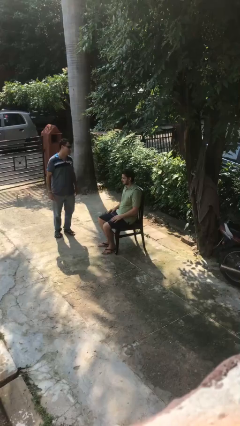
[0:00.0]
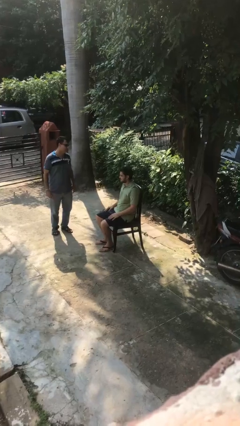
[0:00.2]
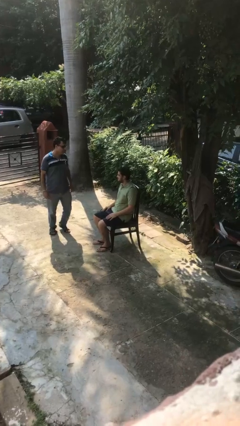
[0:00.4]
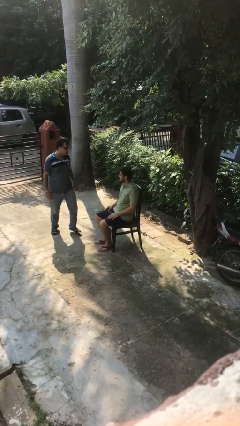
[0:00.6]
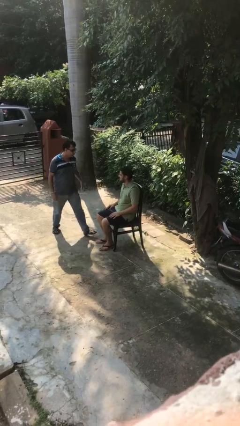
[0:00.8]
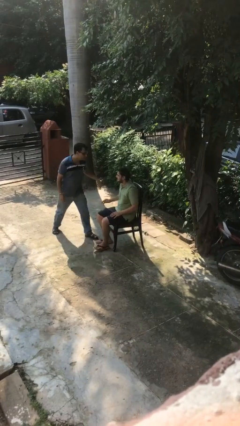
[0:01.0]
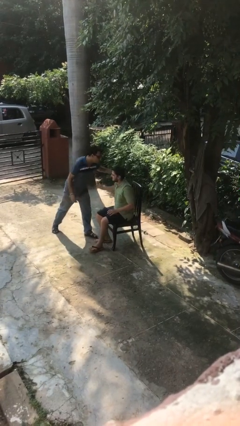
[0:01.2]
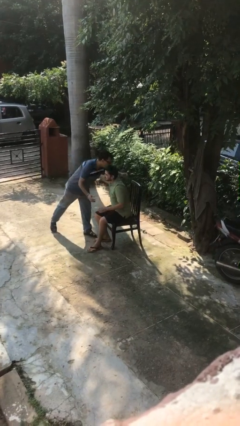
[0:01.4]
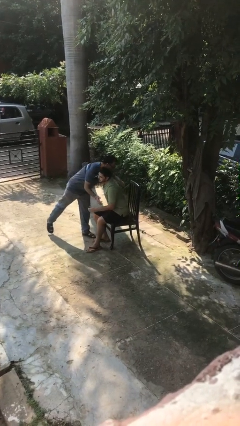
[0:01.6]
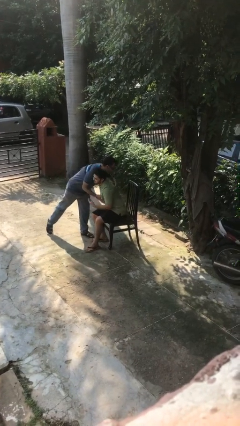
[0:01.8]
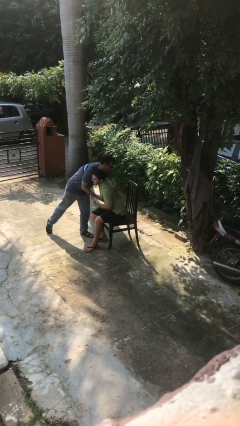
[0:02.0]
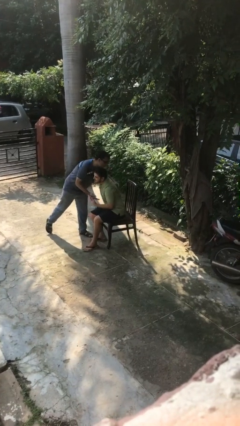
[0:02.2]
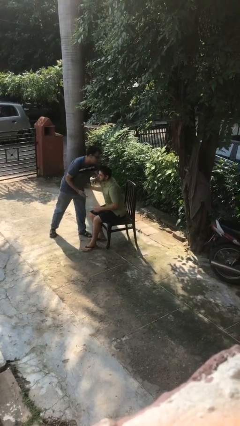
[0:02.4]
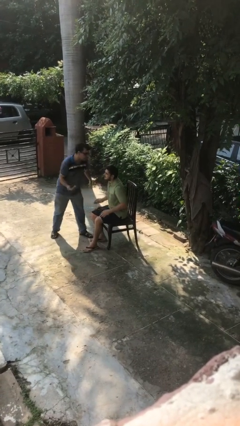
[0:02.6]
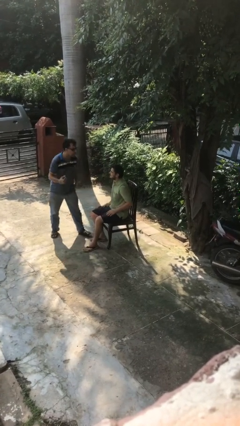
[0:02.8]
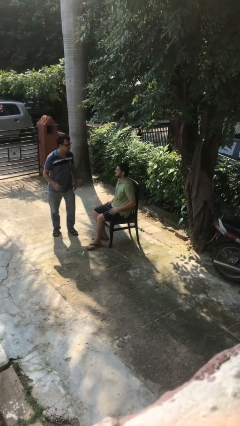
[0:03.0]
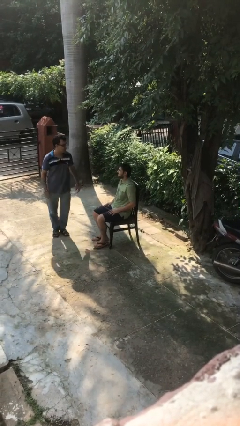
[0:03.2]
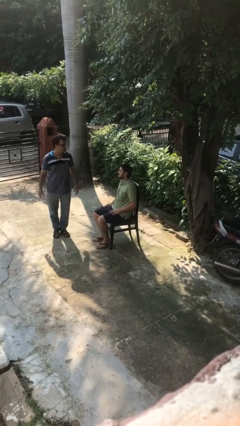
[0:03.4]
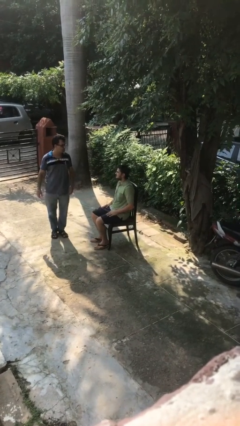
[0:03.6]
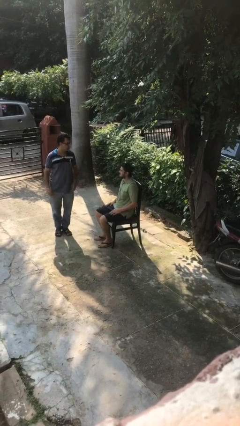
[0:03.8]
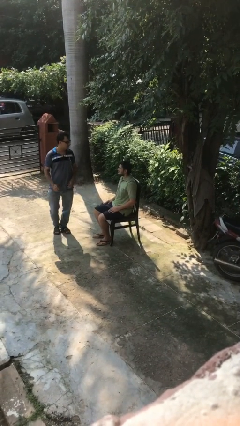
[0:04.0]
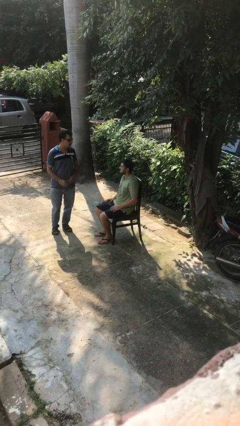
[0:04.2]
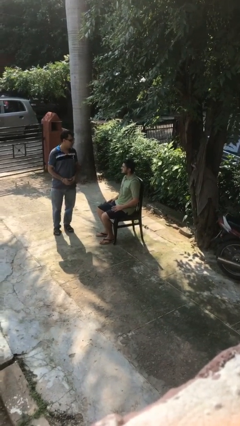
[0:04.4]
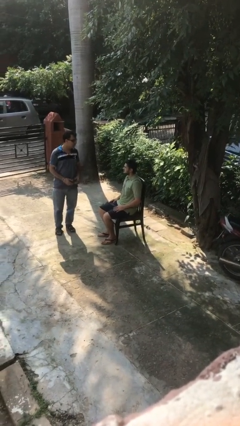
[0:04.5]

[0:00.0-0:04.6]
person embraces person

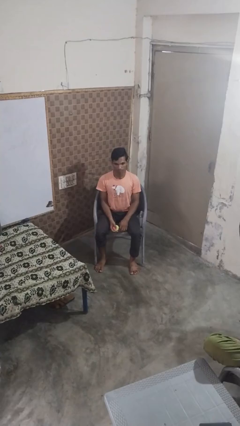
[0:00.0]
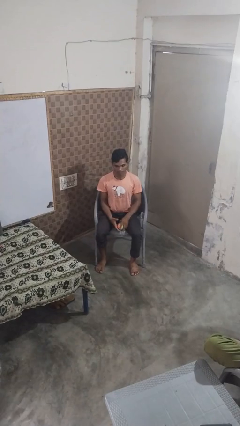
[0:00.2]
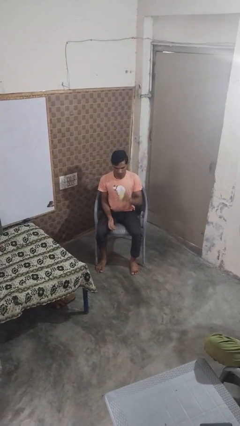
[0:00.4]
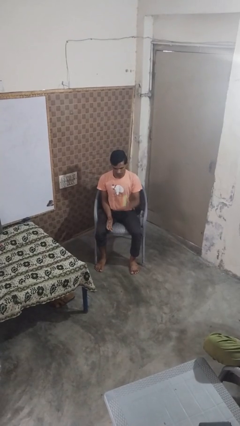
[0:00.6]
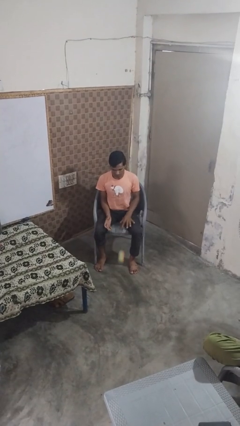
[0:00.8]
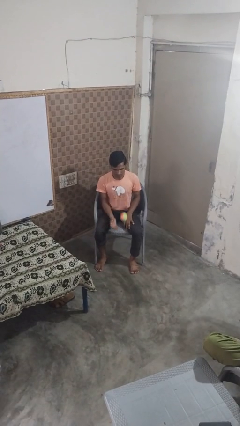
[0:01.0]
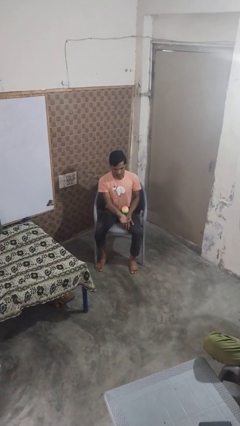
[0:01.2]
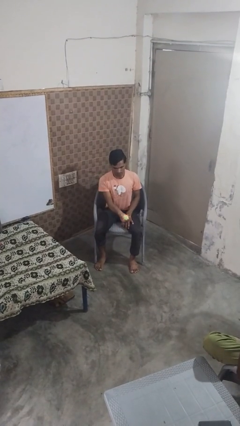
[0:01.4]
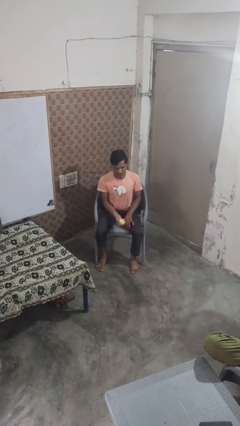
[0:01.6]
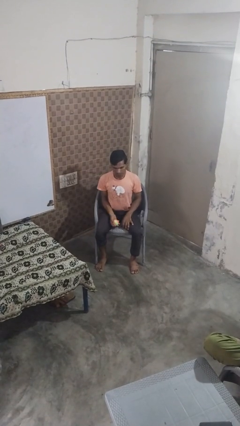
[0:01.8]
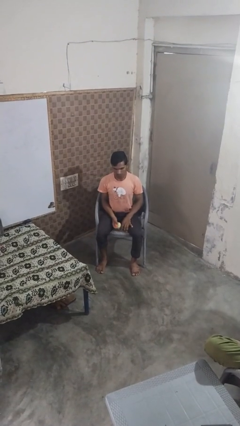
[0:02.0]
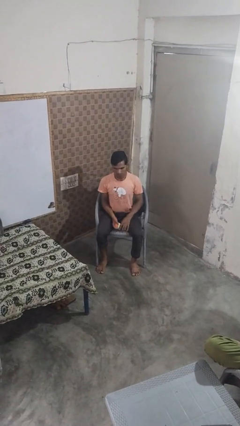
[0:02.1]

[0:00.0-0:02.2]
person bounces ball on floor

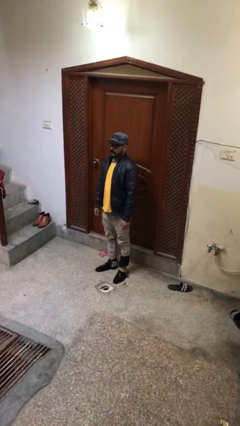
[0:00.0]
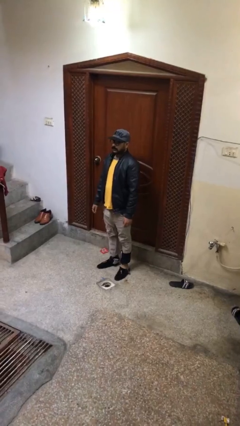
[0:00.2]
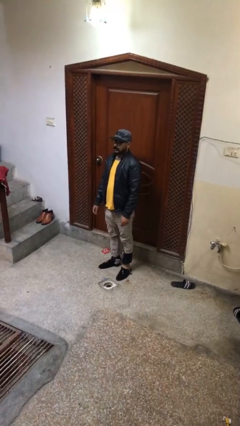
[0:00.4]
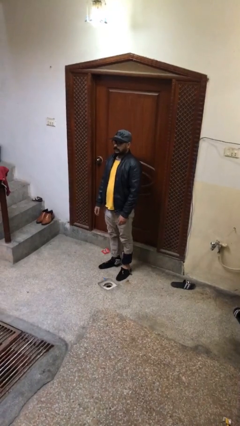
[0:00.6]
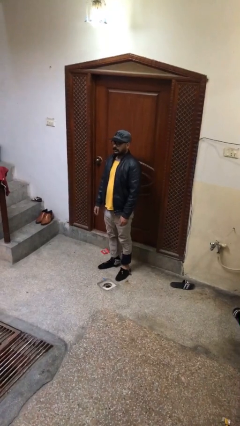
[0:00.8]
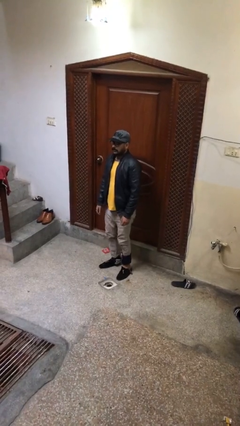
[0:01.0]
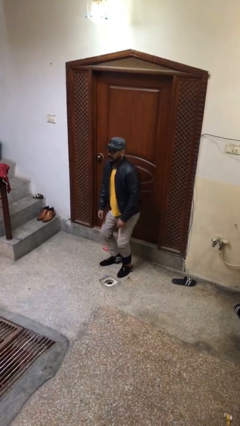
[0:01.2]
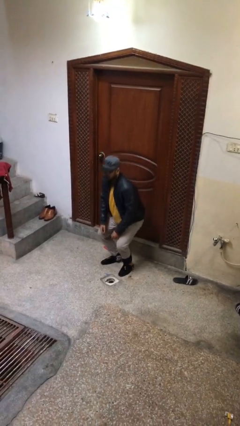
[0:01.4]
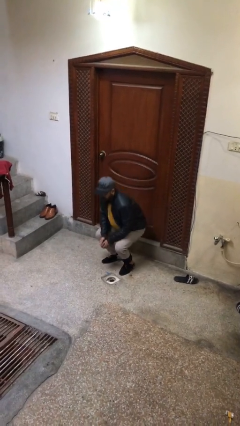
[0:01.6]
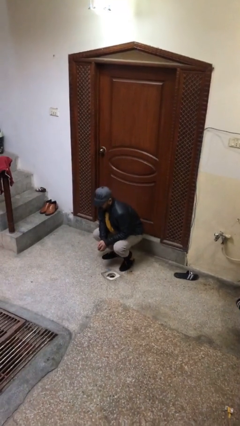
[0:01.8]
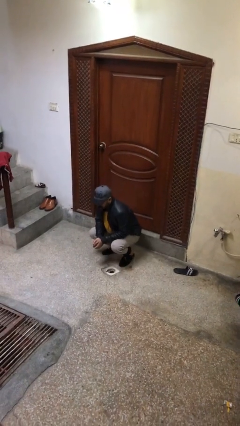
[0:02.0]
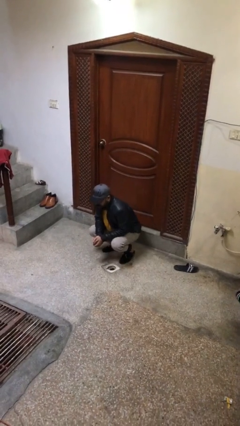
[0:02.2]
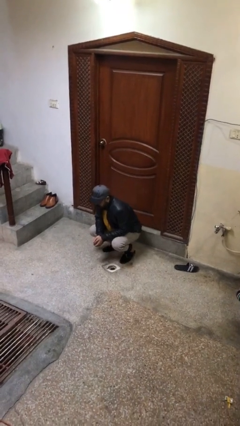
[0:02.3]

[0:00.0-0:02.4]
person sits down

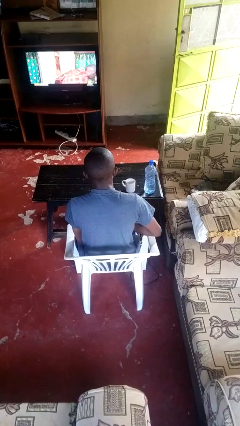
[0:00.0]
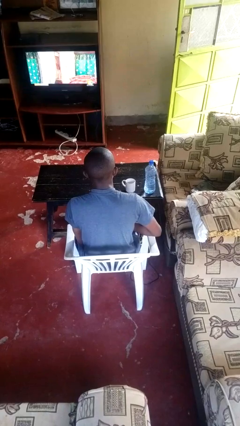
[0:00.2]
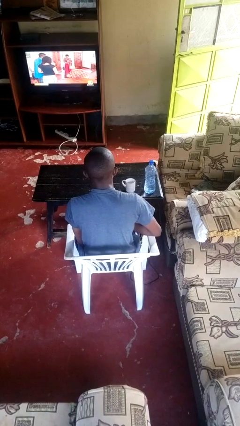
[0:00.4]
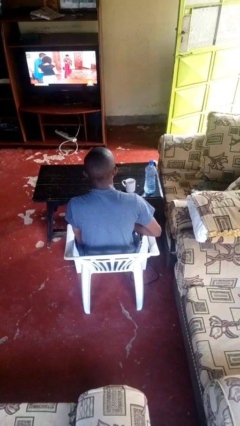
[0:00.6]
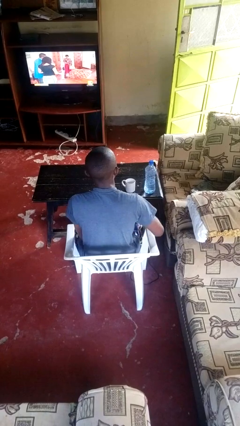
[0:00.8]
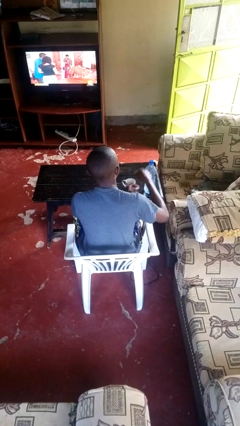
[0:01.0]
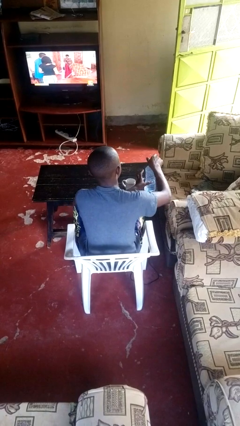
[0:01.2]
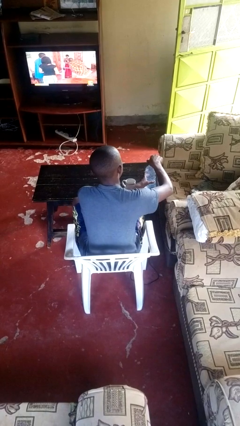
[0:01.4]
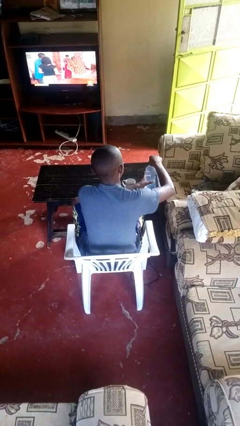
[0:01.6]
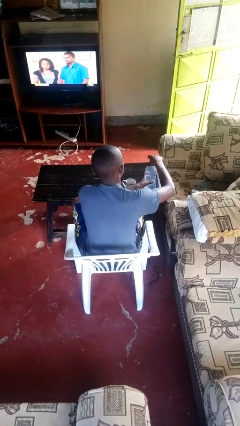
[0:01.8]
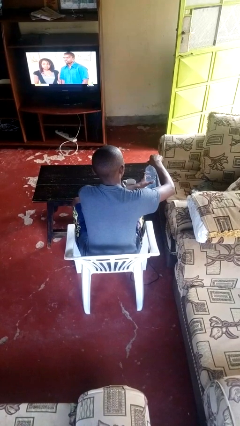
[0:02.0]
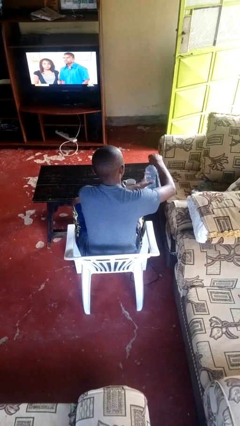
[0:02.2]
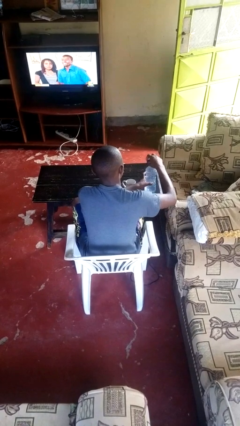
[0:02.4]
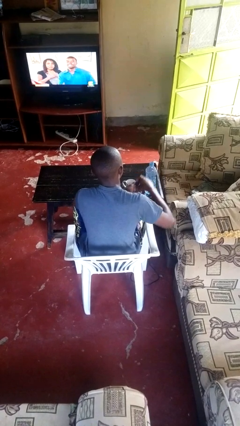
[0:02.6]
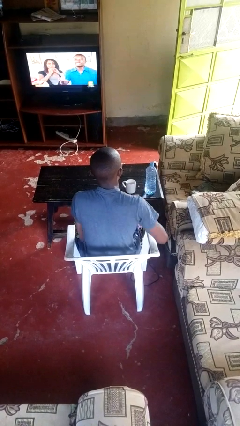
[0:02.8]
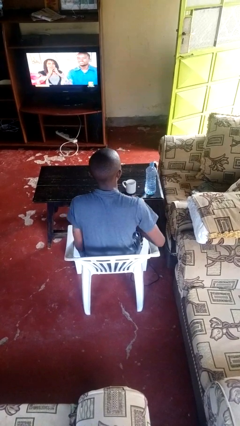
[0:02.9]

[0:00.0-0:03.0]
person unscrews lid from bottle

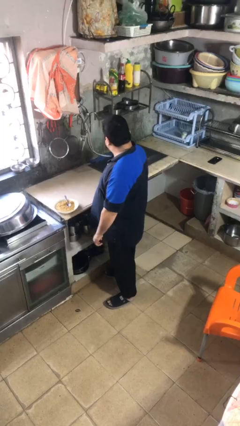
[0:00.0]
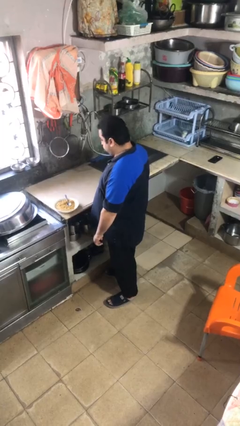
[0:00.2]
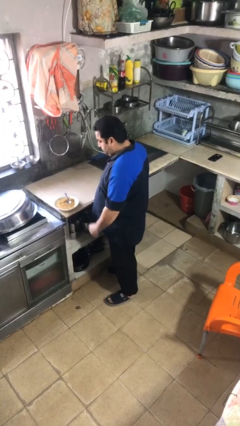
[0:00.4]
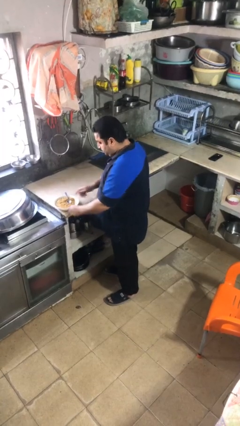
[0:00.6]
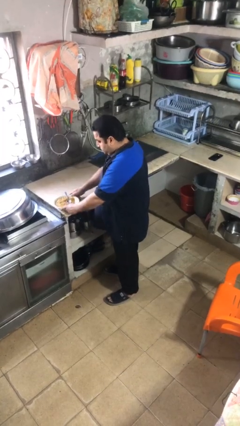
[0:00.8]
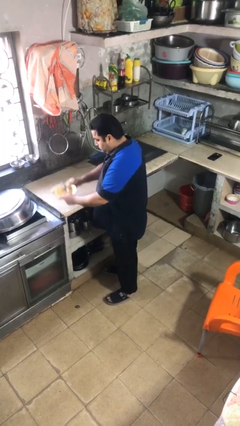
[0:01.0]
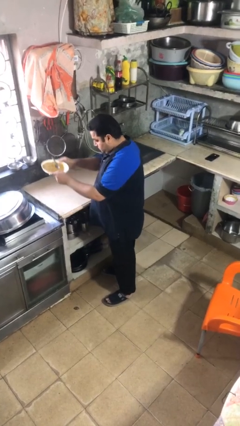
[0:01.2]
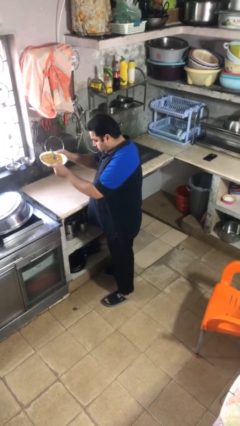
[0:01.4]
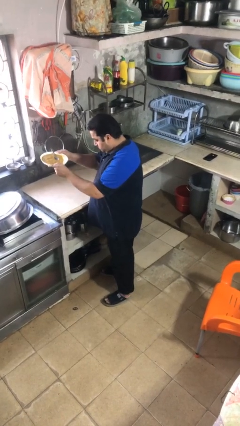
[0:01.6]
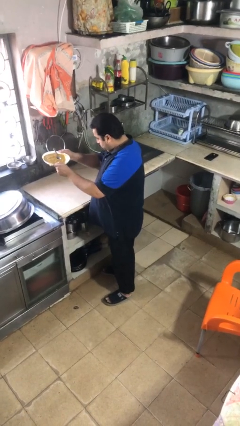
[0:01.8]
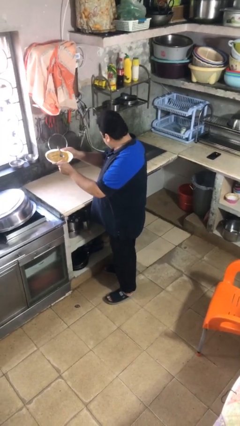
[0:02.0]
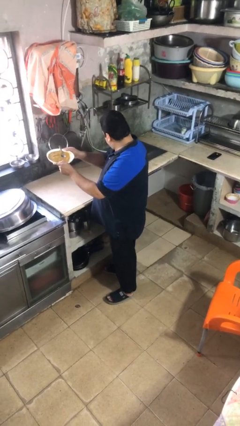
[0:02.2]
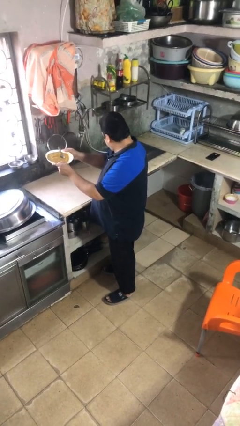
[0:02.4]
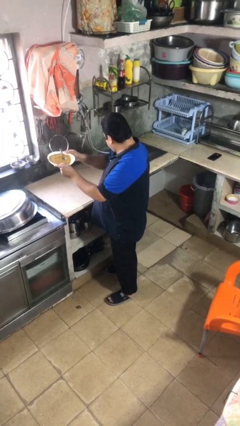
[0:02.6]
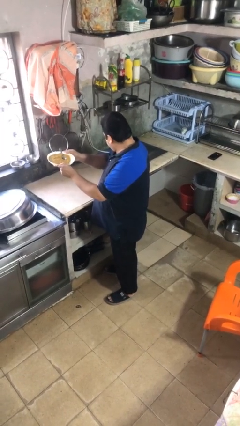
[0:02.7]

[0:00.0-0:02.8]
person picks up object from countertop

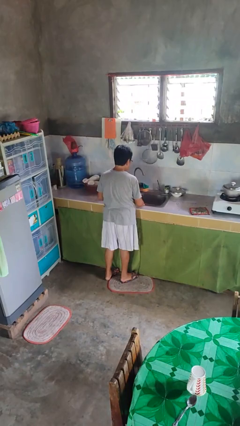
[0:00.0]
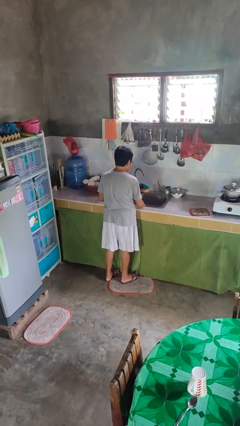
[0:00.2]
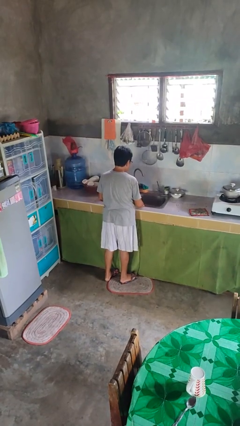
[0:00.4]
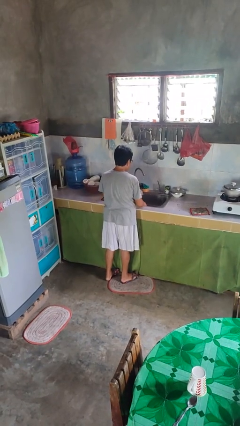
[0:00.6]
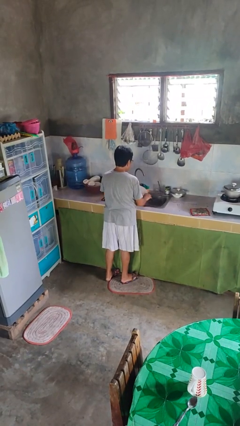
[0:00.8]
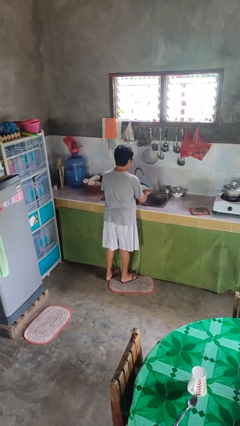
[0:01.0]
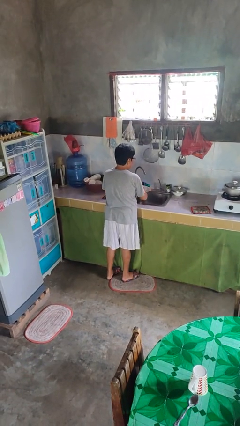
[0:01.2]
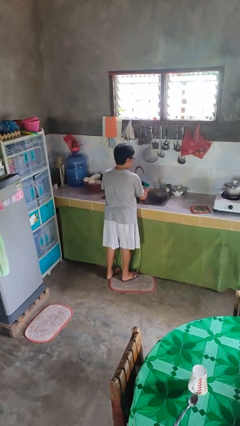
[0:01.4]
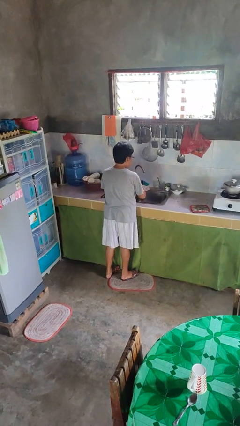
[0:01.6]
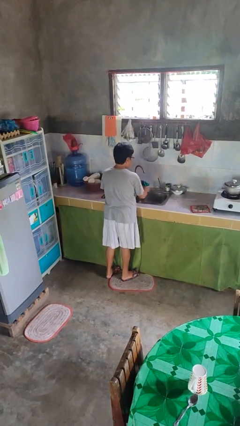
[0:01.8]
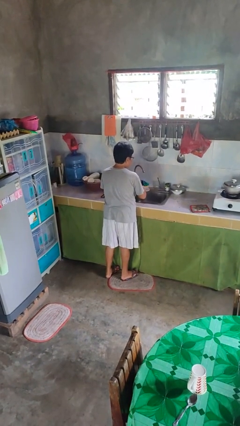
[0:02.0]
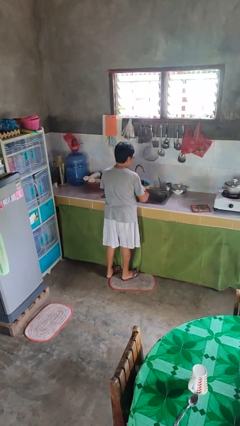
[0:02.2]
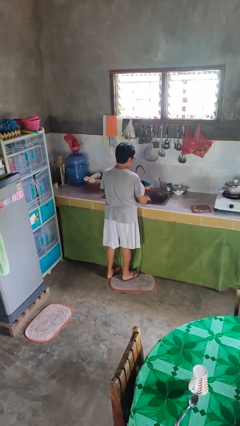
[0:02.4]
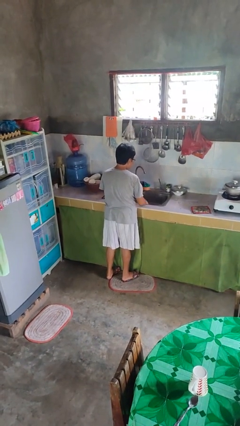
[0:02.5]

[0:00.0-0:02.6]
person washes dish
